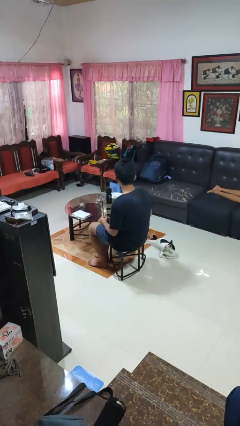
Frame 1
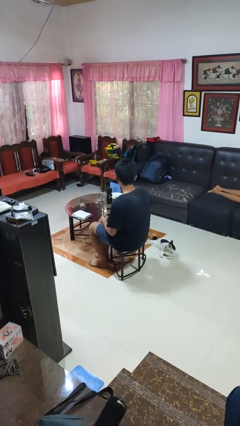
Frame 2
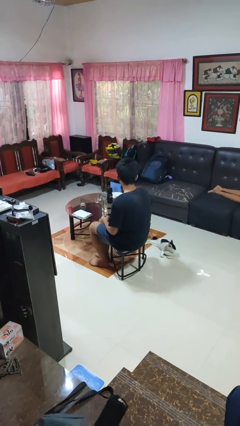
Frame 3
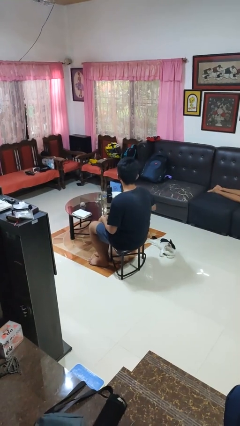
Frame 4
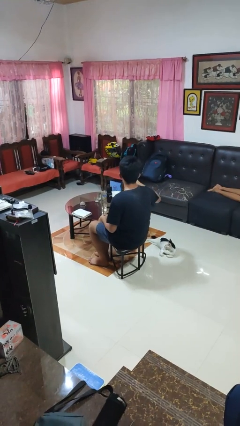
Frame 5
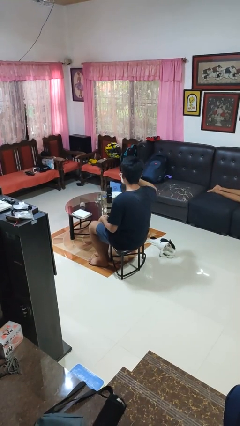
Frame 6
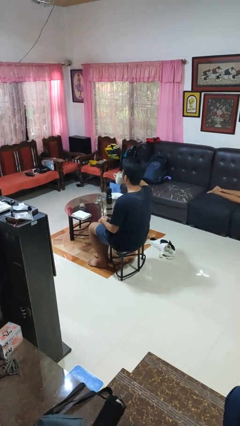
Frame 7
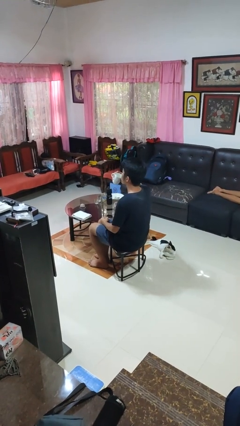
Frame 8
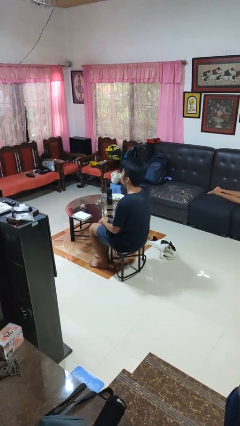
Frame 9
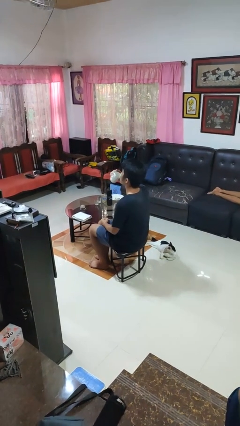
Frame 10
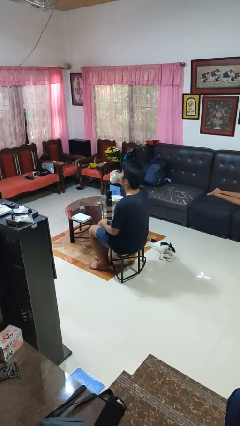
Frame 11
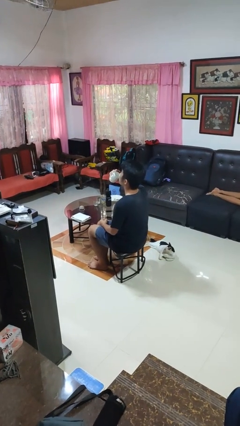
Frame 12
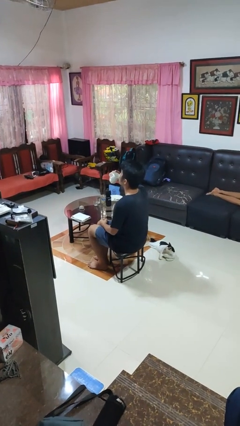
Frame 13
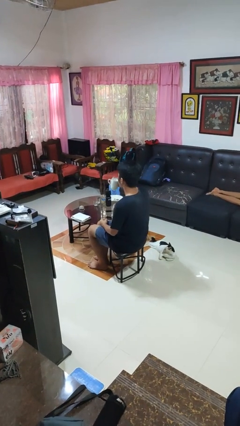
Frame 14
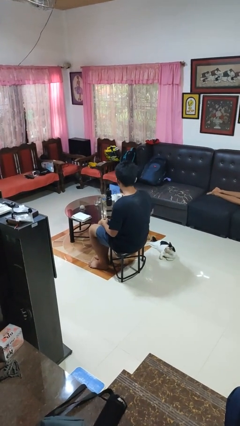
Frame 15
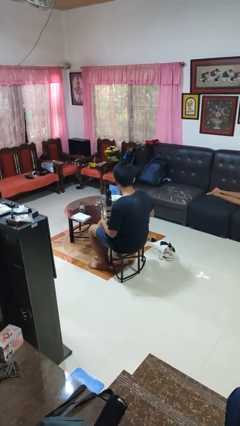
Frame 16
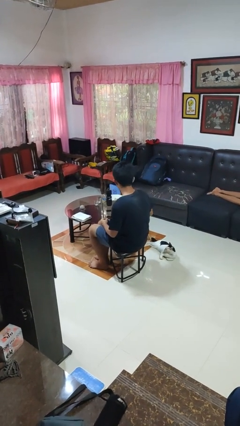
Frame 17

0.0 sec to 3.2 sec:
person drinks from cup

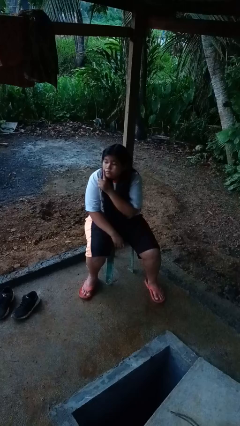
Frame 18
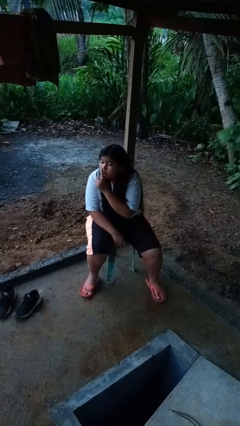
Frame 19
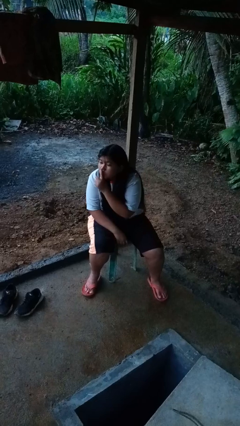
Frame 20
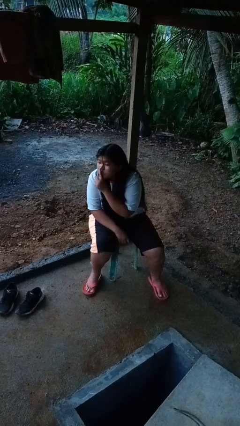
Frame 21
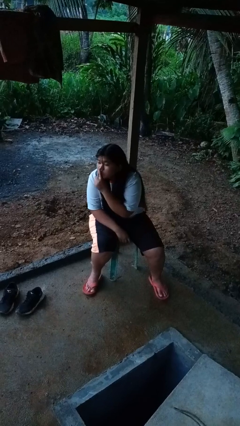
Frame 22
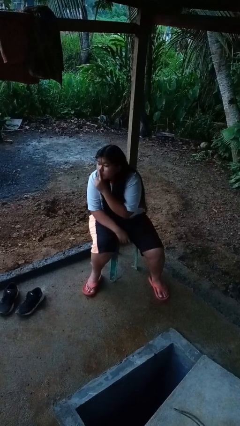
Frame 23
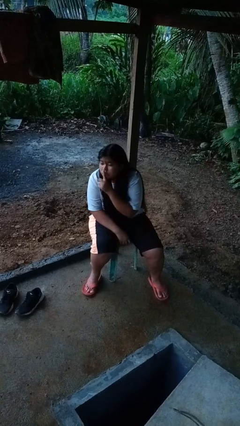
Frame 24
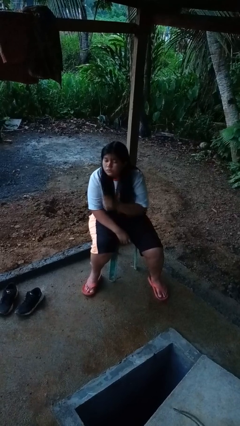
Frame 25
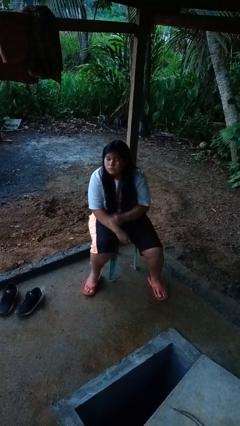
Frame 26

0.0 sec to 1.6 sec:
person gestures be quiet

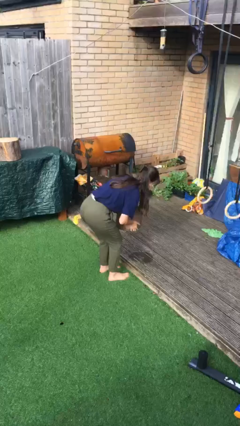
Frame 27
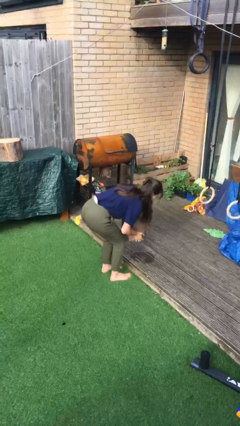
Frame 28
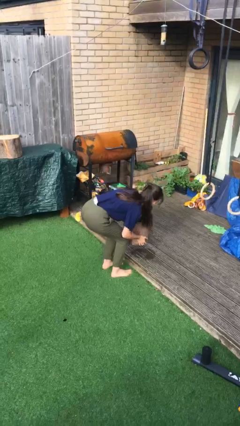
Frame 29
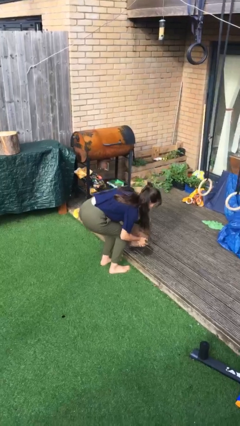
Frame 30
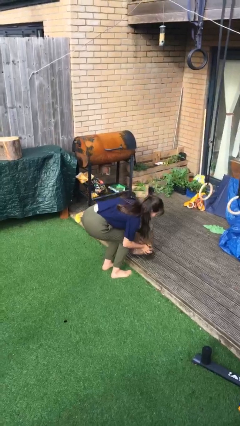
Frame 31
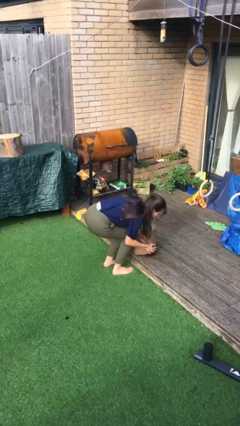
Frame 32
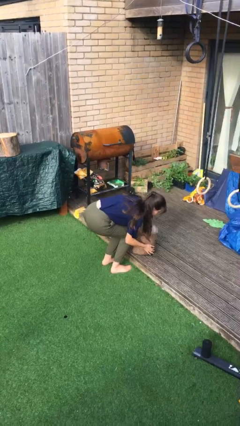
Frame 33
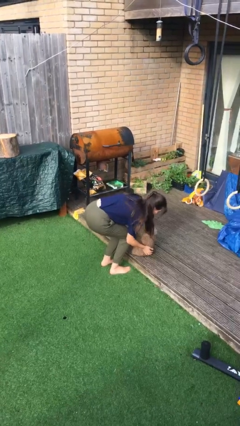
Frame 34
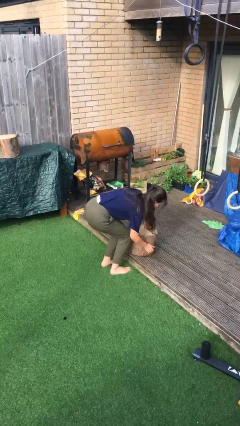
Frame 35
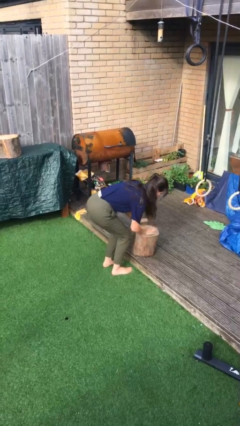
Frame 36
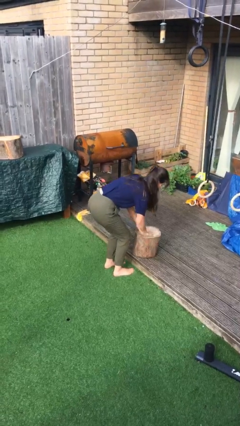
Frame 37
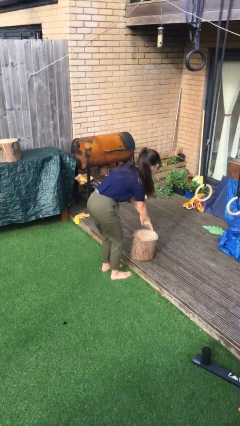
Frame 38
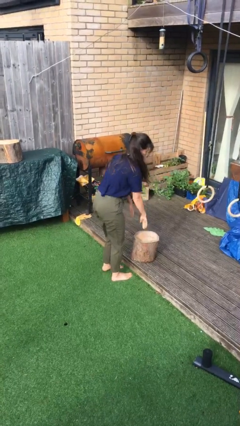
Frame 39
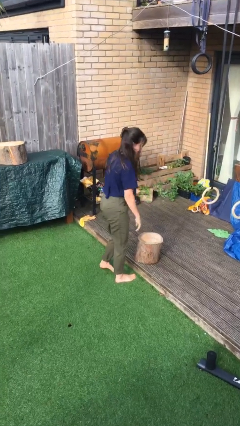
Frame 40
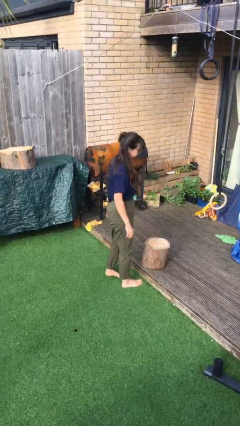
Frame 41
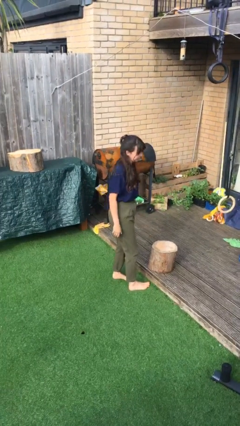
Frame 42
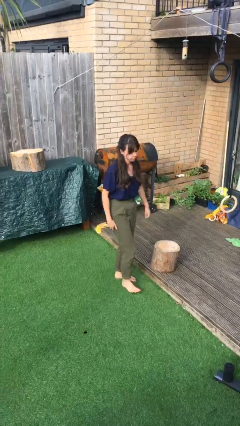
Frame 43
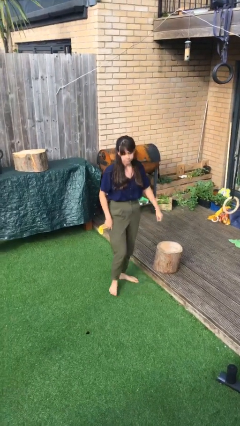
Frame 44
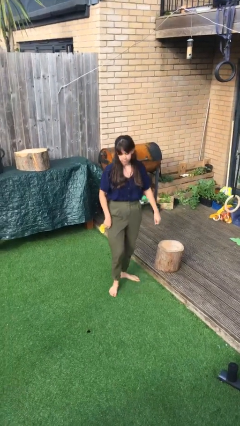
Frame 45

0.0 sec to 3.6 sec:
person puts down object on floor

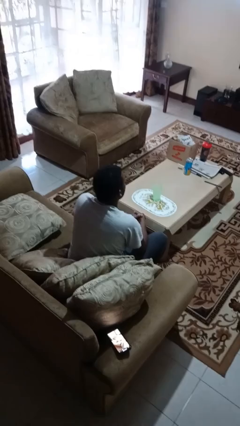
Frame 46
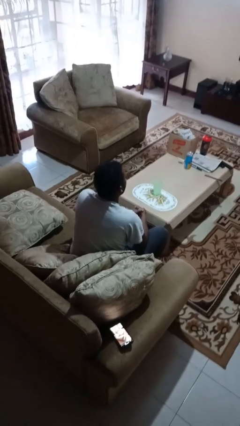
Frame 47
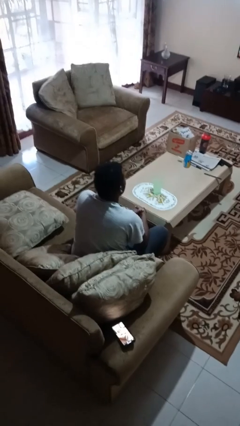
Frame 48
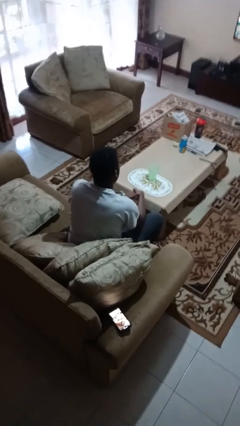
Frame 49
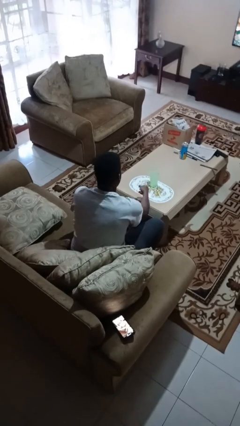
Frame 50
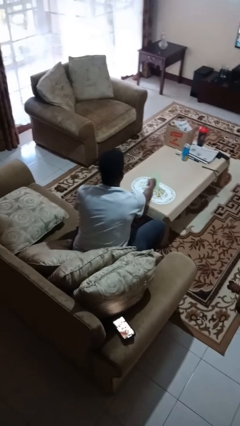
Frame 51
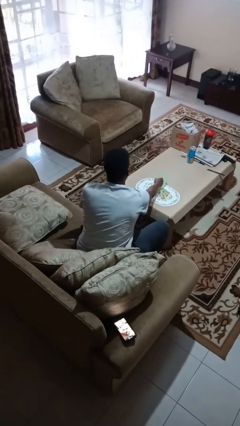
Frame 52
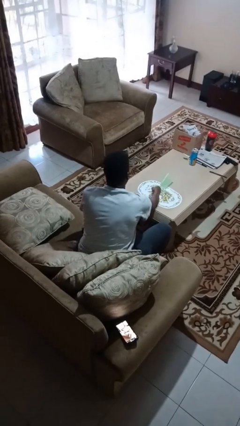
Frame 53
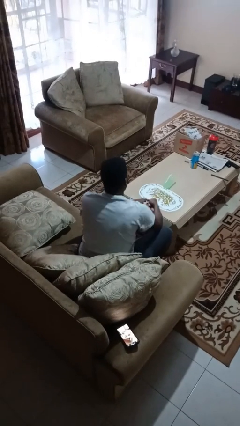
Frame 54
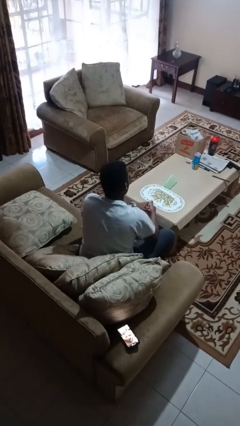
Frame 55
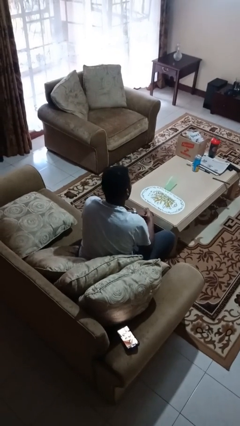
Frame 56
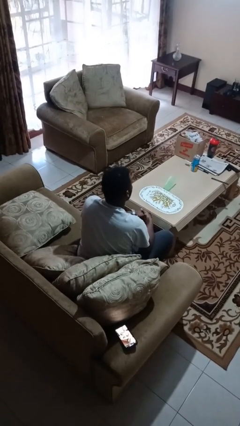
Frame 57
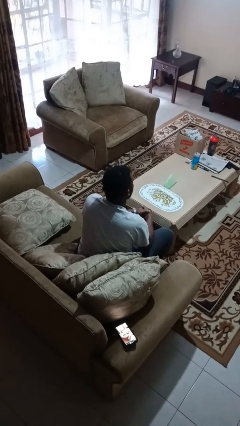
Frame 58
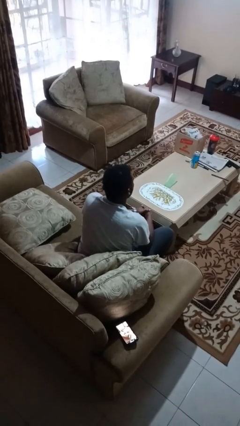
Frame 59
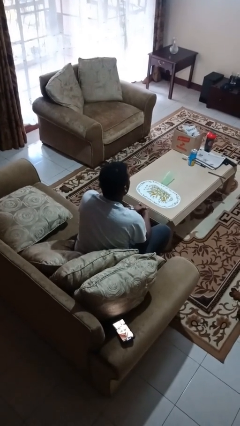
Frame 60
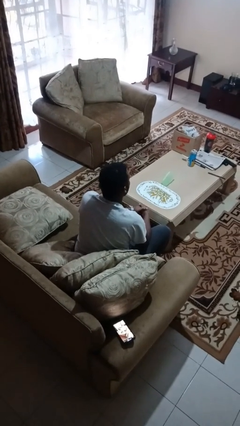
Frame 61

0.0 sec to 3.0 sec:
person knocks over glass

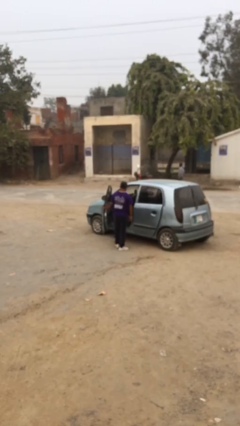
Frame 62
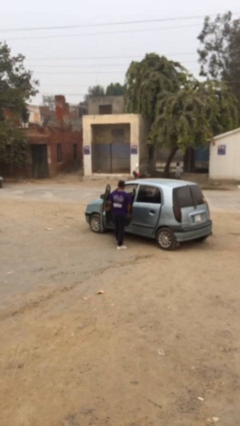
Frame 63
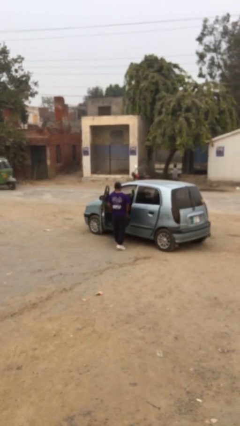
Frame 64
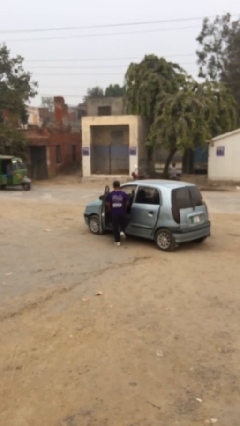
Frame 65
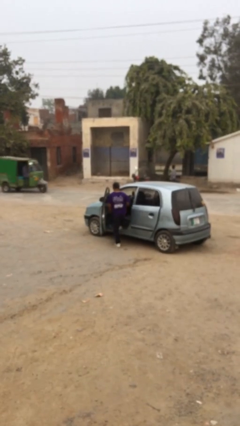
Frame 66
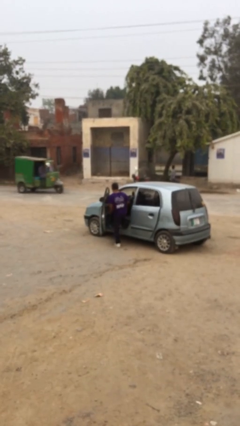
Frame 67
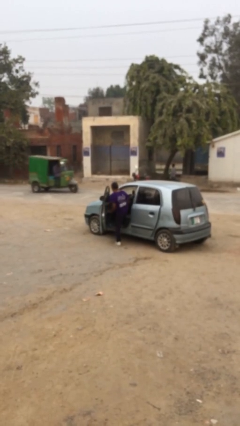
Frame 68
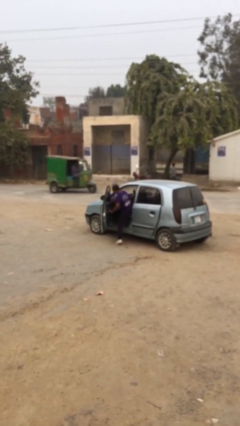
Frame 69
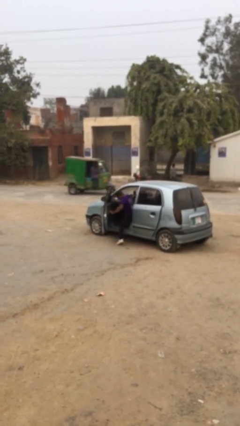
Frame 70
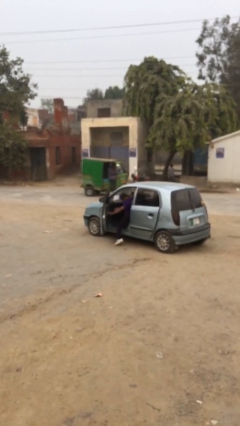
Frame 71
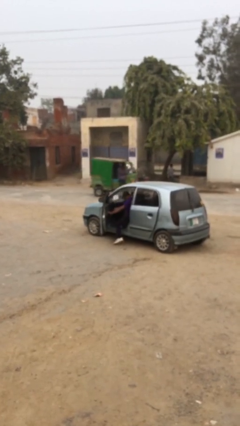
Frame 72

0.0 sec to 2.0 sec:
person enters car

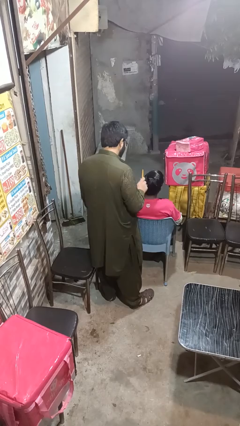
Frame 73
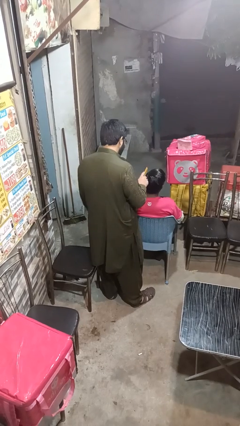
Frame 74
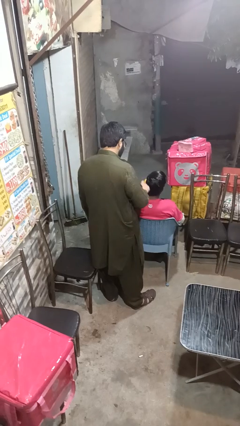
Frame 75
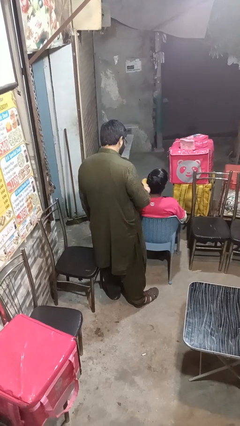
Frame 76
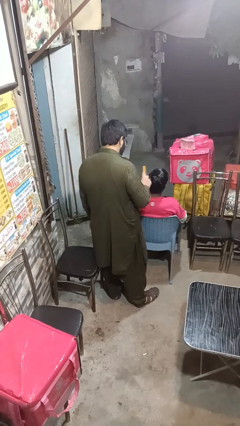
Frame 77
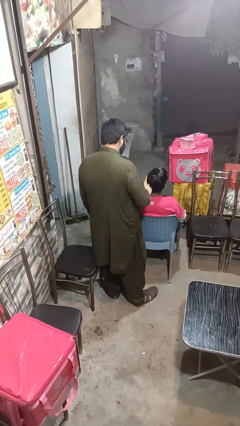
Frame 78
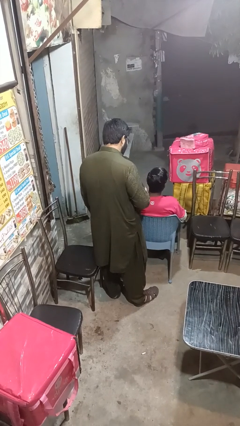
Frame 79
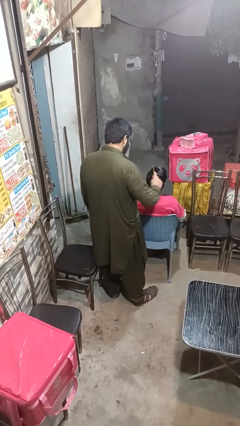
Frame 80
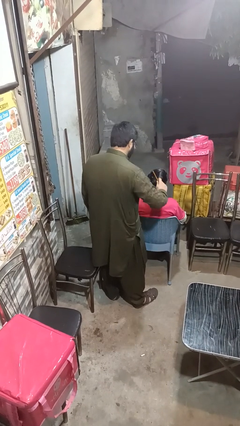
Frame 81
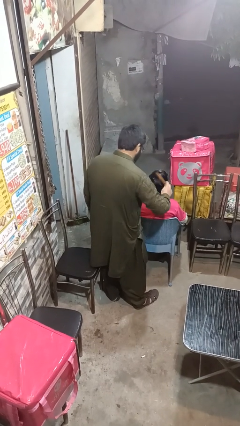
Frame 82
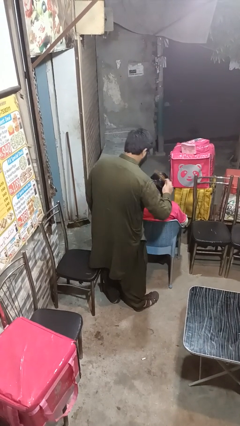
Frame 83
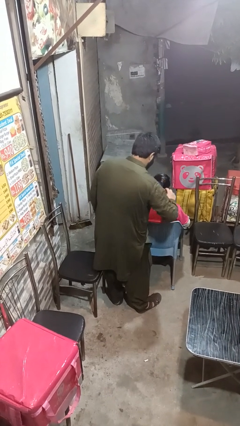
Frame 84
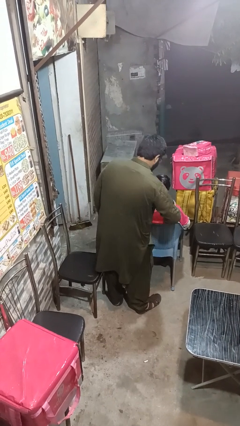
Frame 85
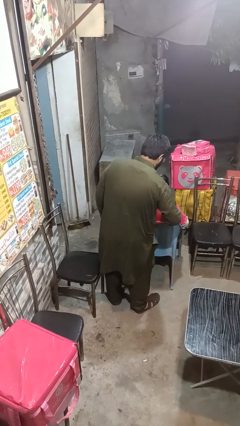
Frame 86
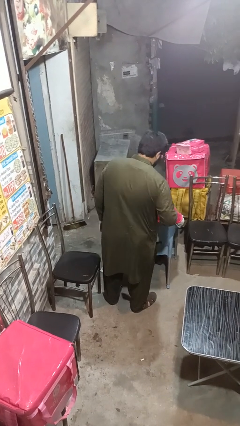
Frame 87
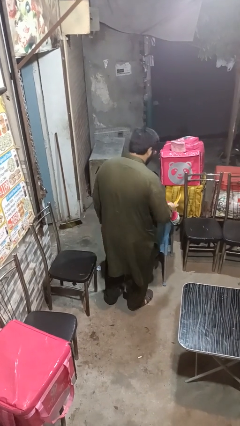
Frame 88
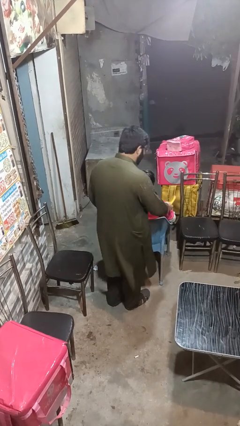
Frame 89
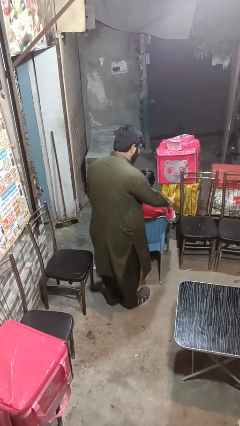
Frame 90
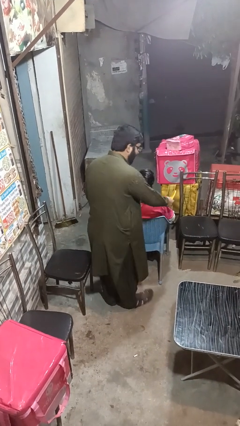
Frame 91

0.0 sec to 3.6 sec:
person brushes hair of person
